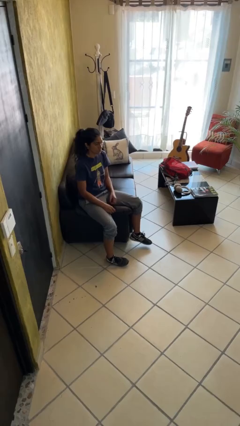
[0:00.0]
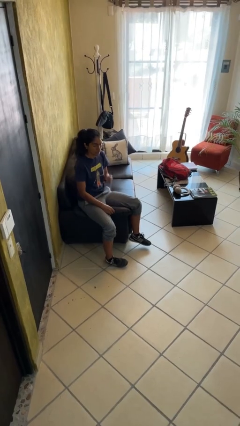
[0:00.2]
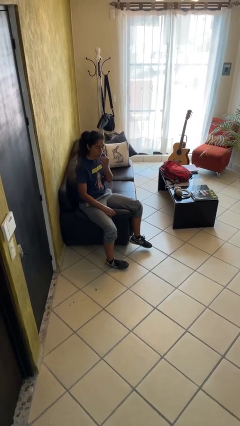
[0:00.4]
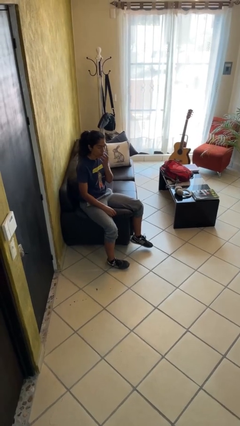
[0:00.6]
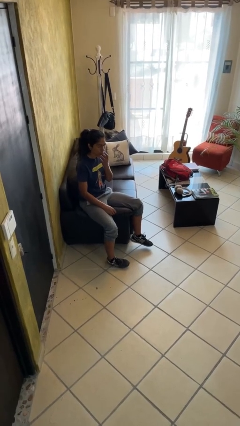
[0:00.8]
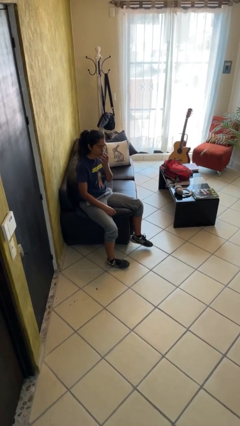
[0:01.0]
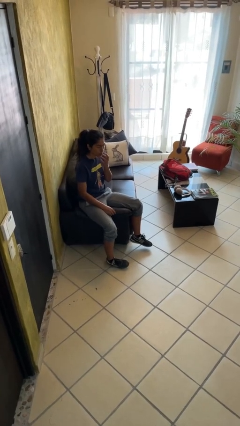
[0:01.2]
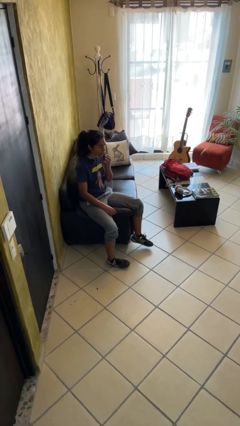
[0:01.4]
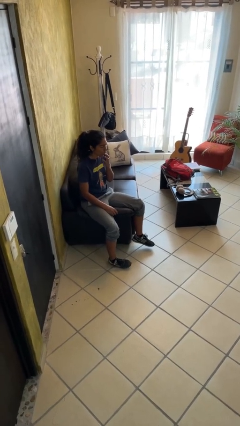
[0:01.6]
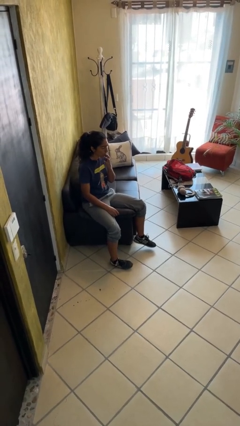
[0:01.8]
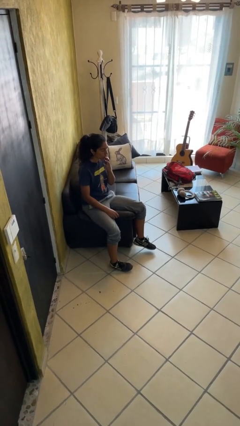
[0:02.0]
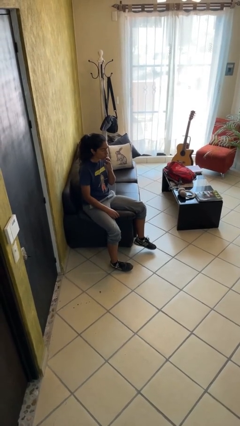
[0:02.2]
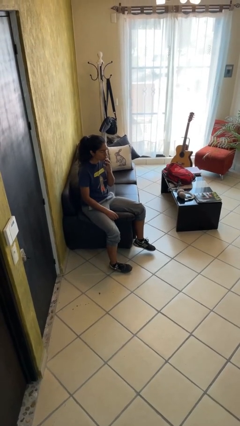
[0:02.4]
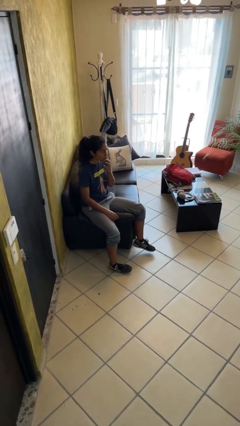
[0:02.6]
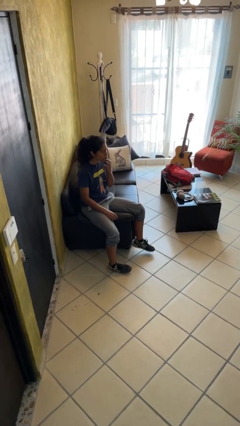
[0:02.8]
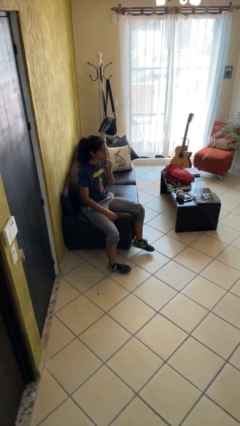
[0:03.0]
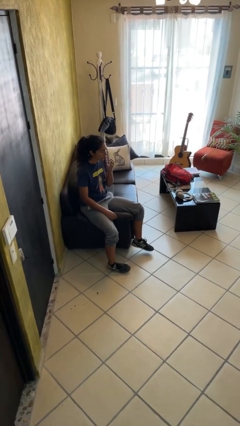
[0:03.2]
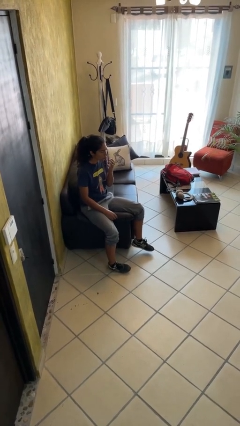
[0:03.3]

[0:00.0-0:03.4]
person licks fingers

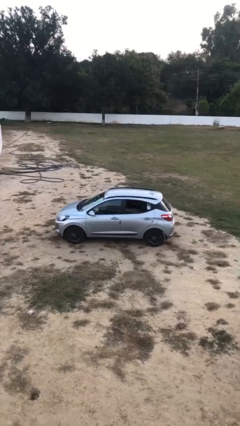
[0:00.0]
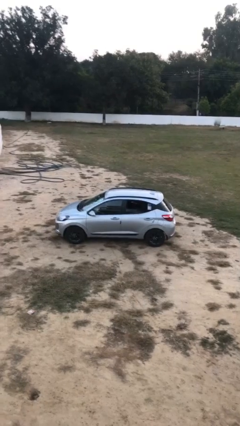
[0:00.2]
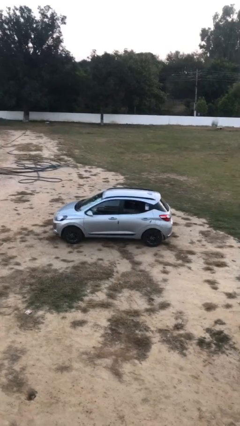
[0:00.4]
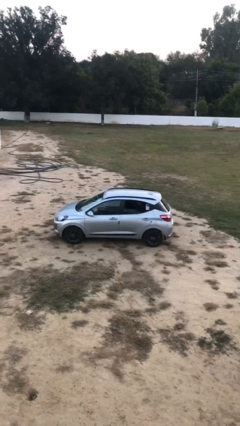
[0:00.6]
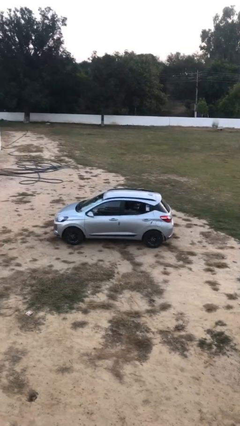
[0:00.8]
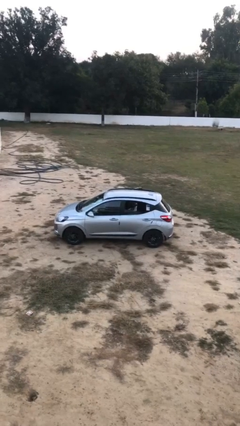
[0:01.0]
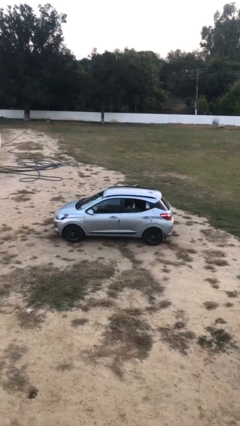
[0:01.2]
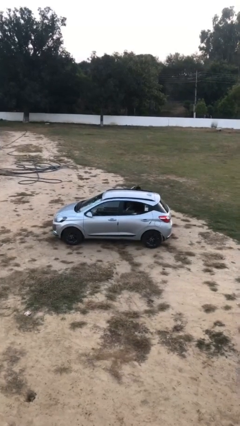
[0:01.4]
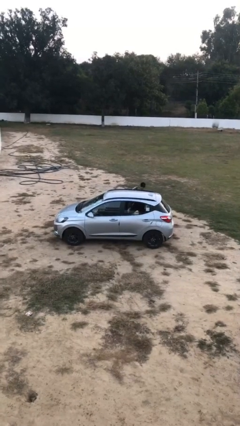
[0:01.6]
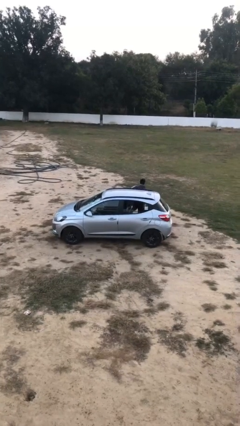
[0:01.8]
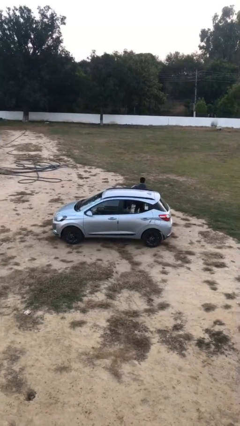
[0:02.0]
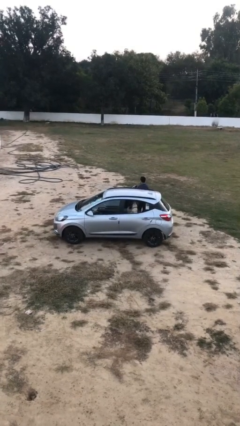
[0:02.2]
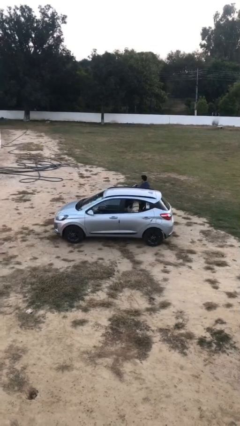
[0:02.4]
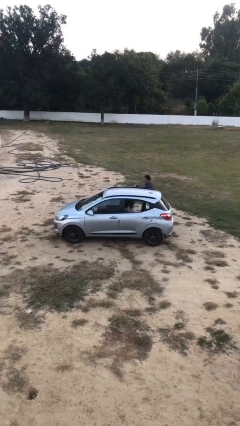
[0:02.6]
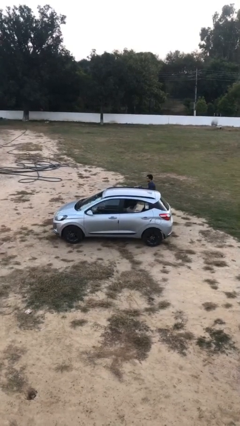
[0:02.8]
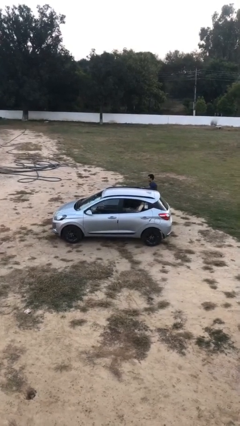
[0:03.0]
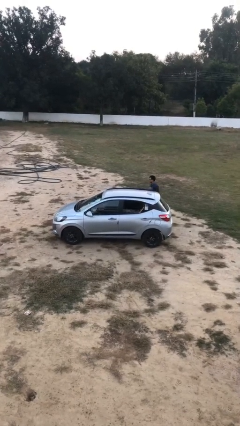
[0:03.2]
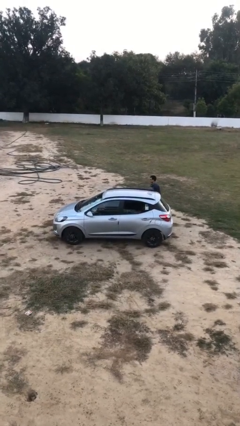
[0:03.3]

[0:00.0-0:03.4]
car drops off person

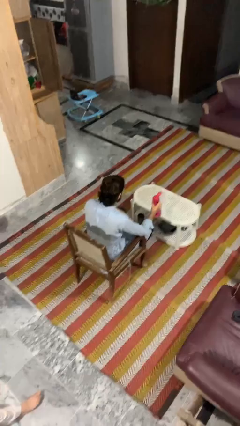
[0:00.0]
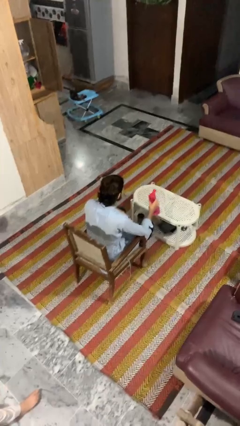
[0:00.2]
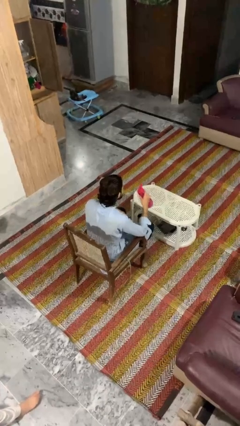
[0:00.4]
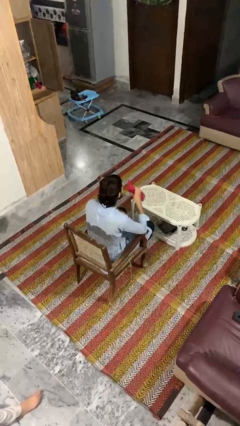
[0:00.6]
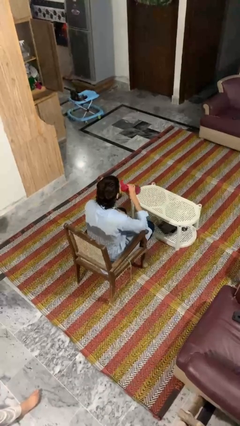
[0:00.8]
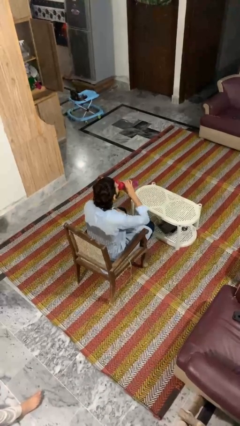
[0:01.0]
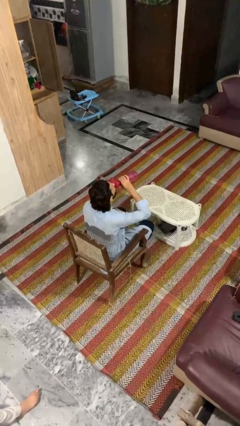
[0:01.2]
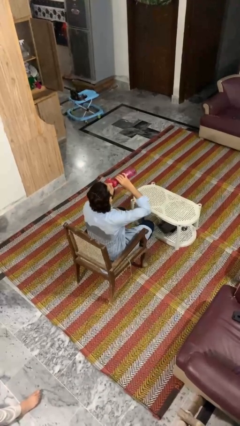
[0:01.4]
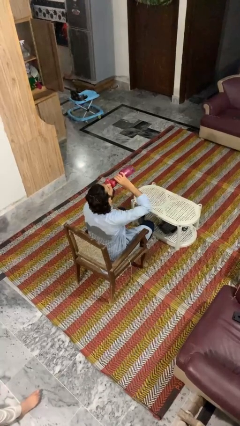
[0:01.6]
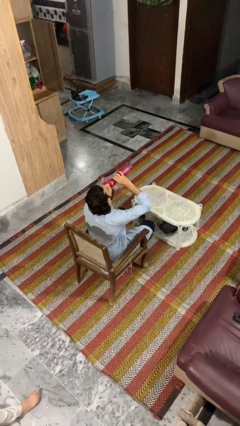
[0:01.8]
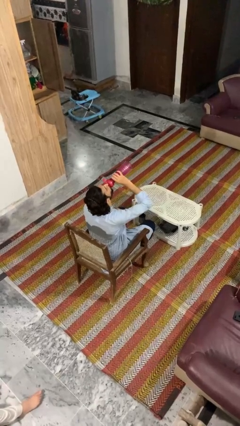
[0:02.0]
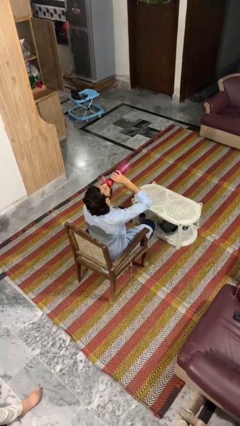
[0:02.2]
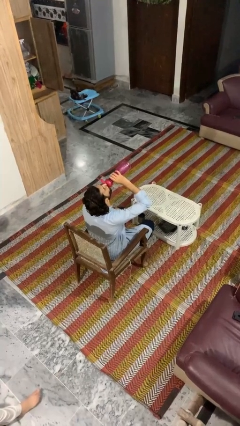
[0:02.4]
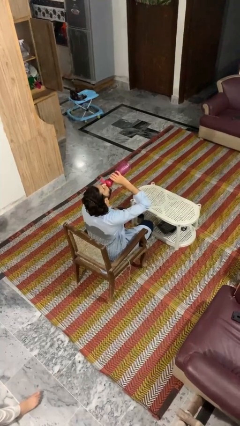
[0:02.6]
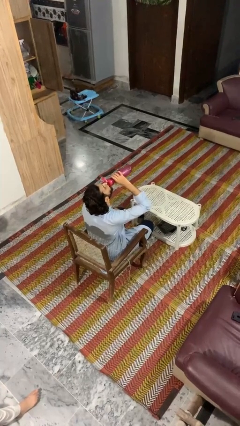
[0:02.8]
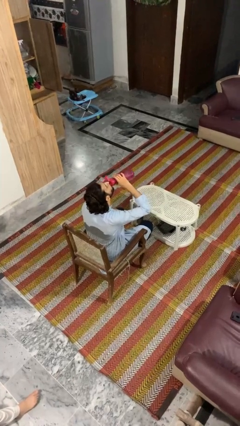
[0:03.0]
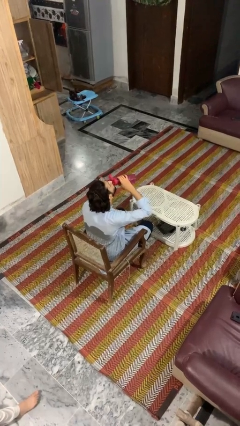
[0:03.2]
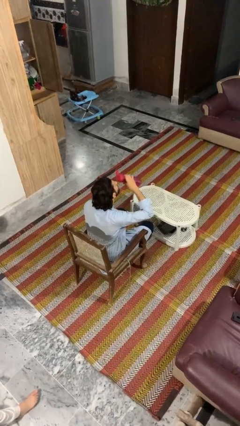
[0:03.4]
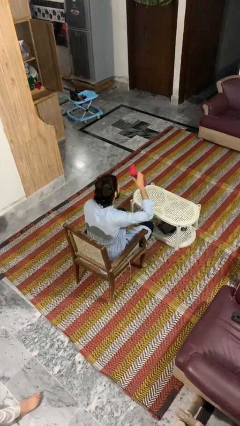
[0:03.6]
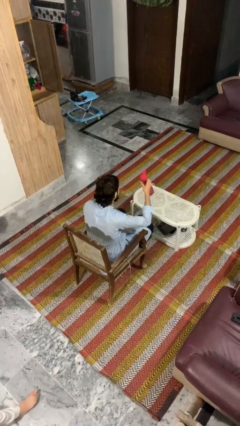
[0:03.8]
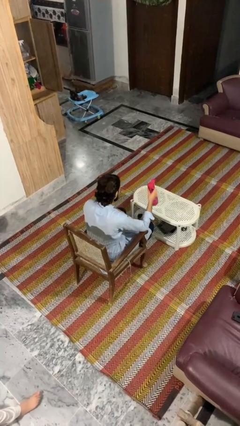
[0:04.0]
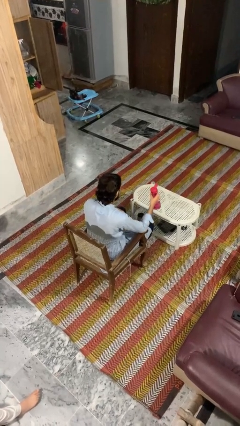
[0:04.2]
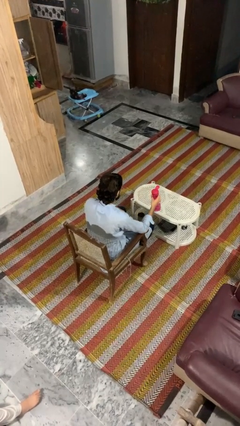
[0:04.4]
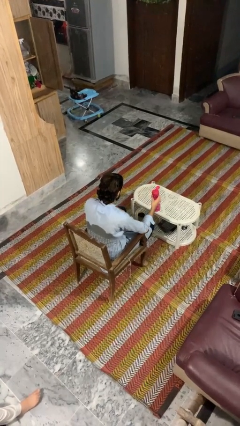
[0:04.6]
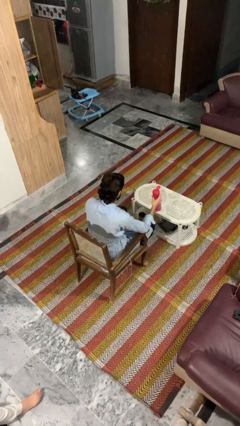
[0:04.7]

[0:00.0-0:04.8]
person drinks from bottle

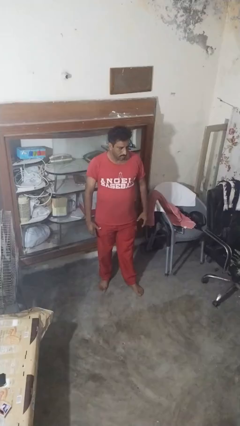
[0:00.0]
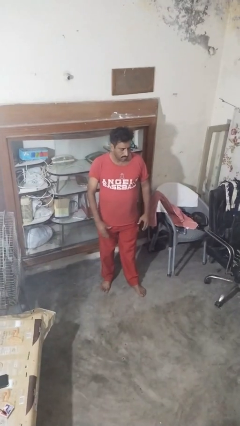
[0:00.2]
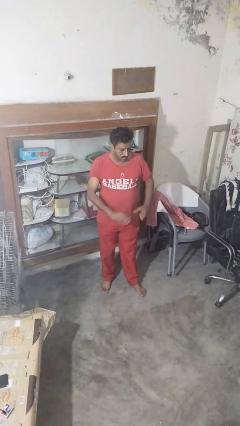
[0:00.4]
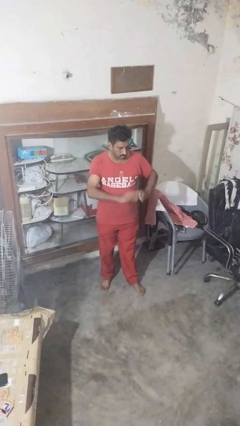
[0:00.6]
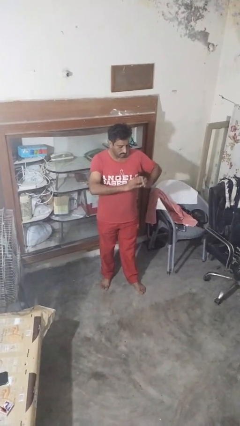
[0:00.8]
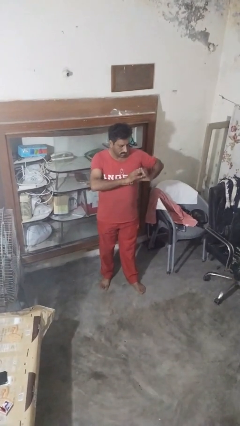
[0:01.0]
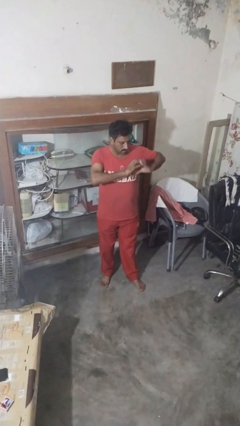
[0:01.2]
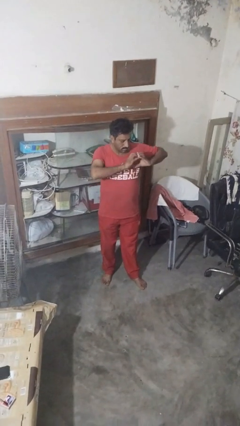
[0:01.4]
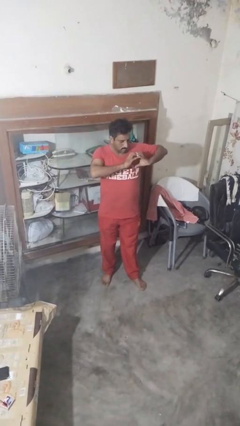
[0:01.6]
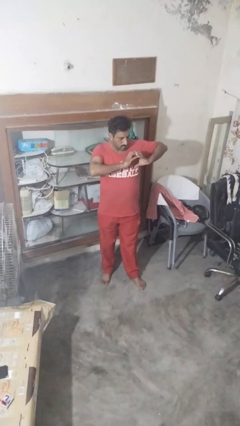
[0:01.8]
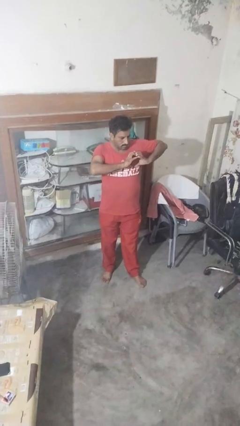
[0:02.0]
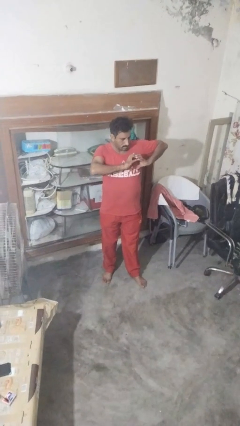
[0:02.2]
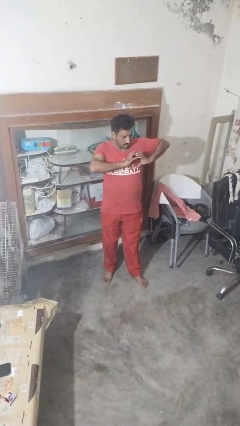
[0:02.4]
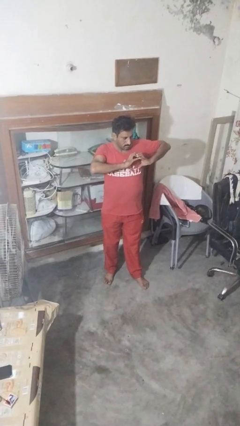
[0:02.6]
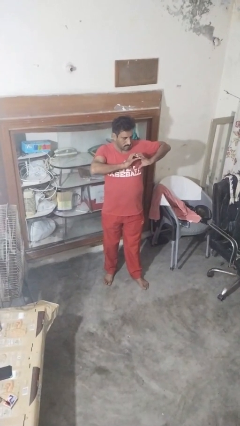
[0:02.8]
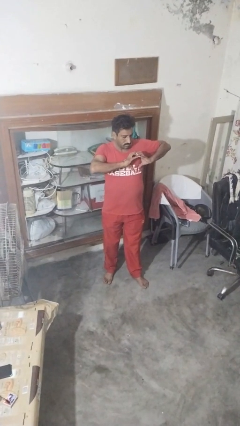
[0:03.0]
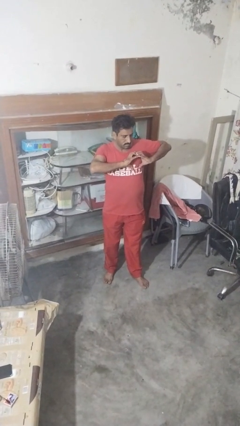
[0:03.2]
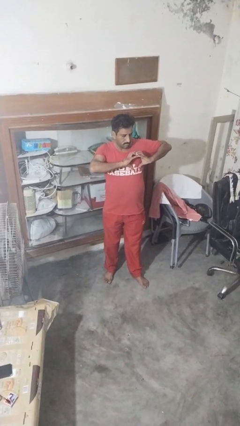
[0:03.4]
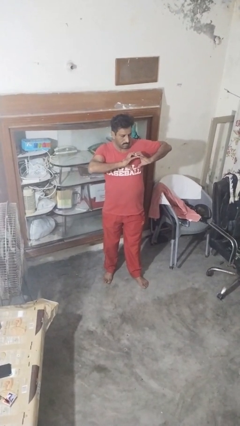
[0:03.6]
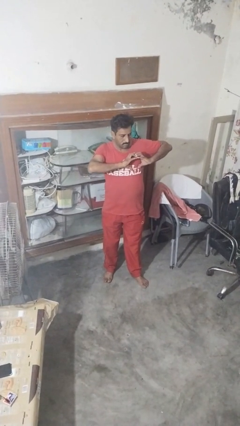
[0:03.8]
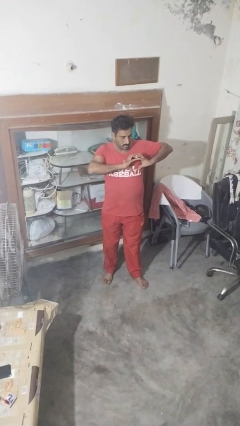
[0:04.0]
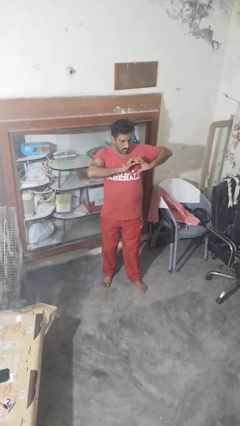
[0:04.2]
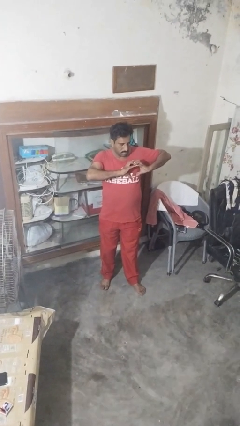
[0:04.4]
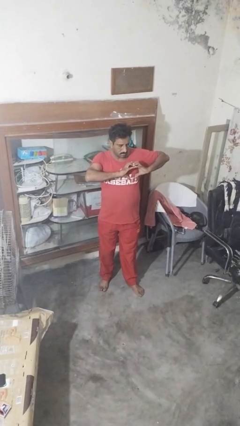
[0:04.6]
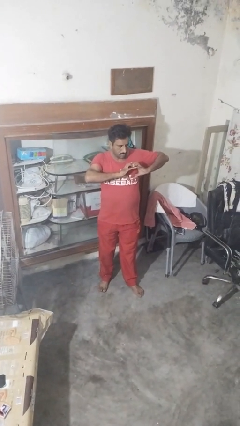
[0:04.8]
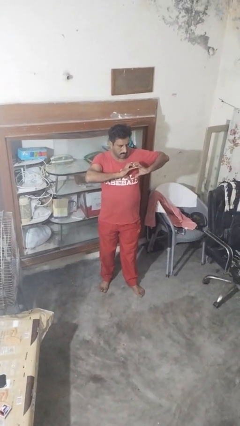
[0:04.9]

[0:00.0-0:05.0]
person gestures heart

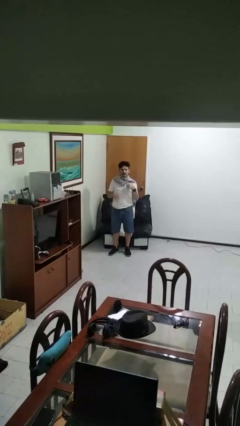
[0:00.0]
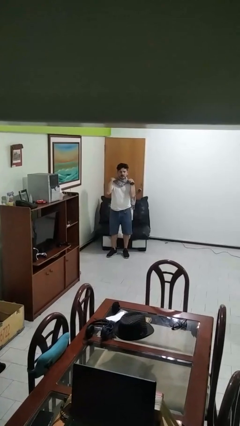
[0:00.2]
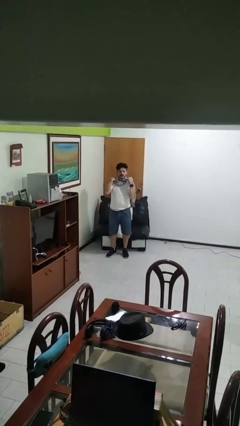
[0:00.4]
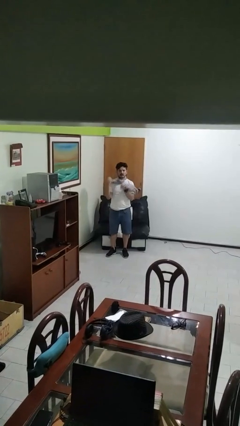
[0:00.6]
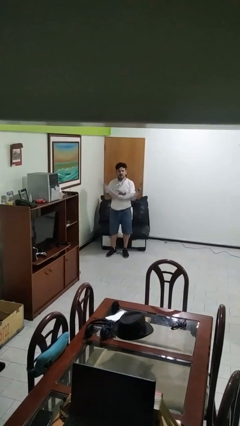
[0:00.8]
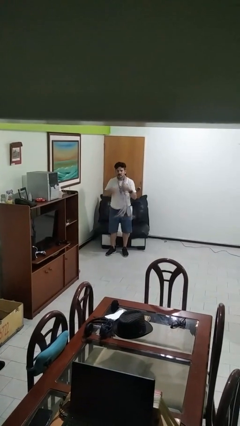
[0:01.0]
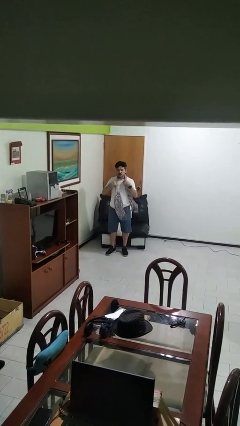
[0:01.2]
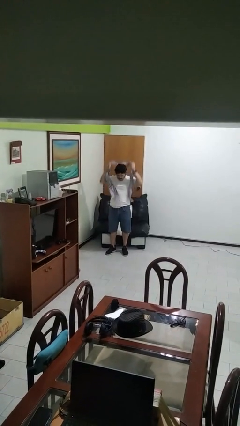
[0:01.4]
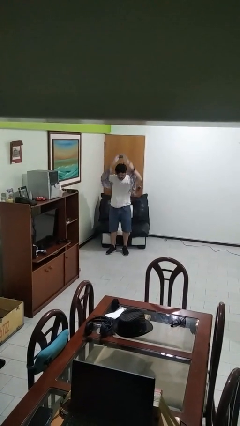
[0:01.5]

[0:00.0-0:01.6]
person takes off scarf
